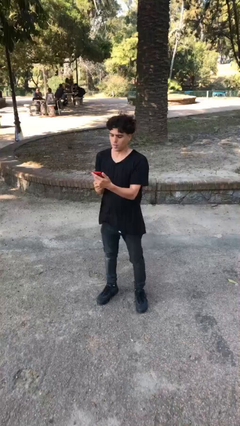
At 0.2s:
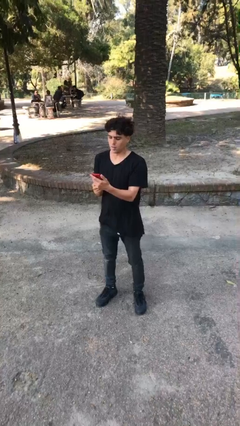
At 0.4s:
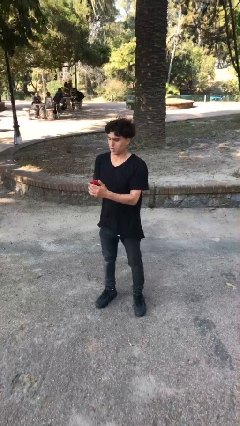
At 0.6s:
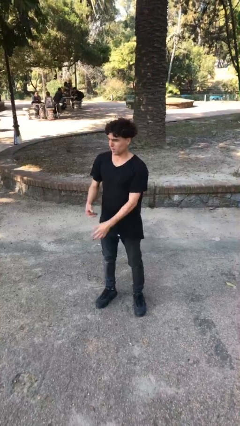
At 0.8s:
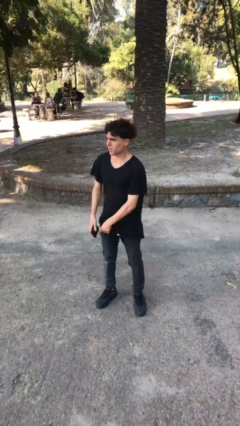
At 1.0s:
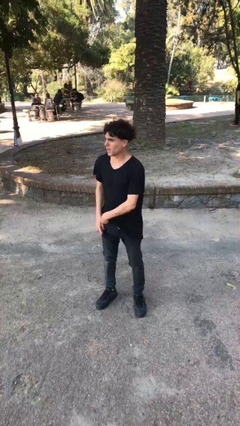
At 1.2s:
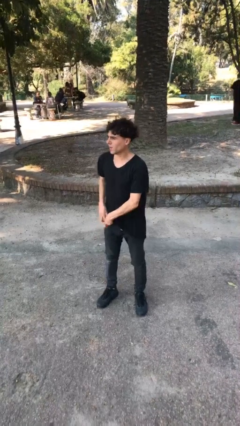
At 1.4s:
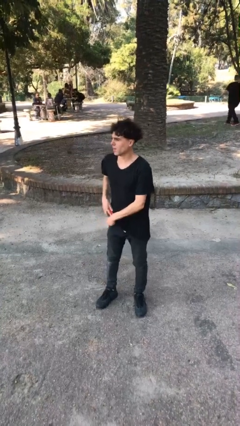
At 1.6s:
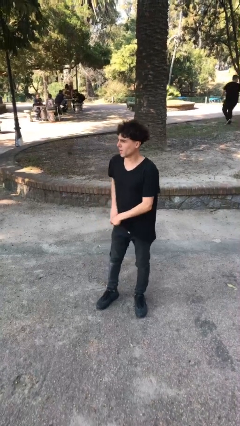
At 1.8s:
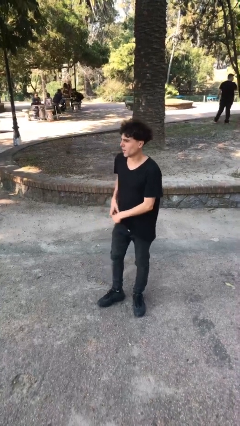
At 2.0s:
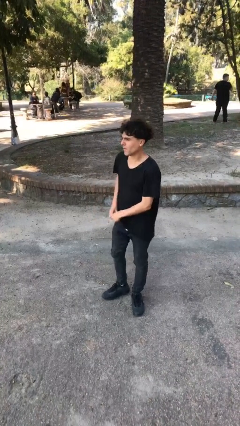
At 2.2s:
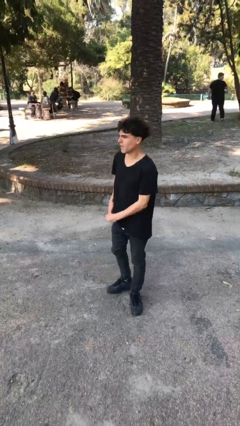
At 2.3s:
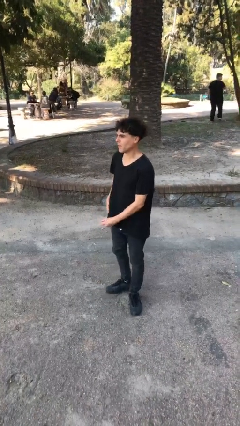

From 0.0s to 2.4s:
person puts phone into pocket

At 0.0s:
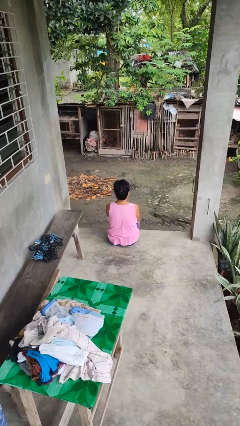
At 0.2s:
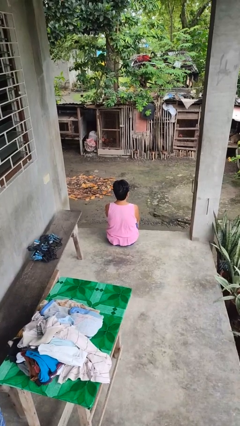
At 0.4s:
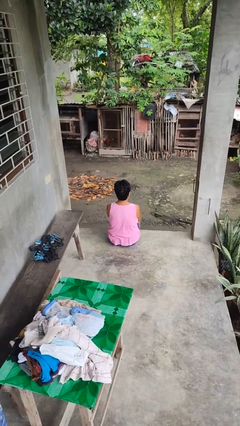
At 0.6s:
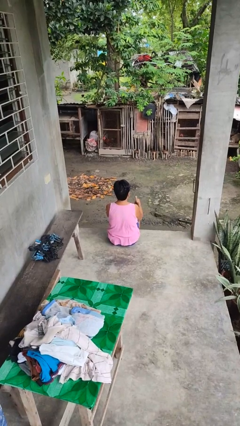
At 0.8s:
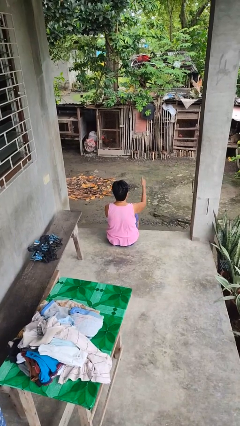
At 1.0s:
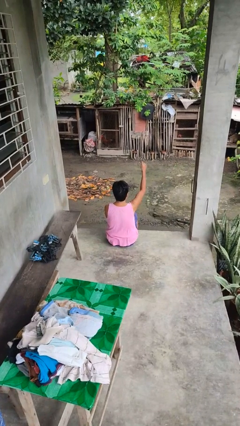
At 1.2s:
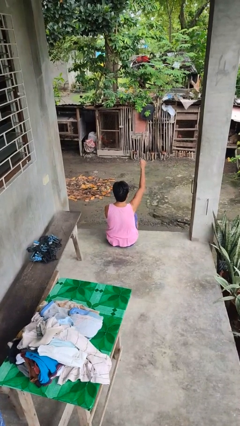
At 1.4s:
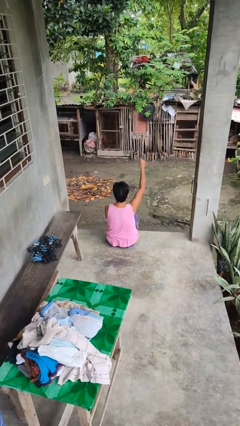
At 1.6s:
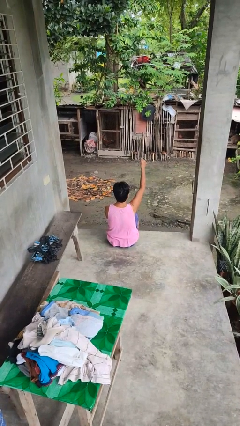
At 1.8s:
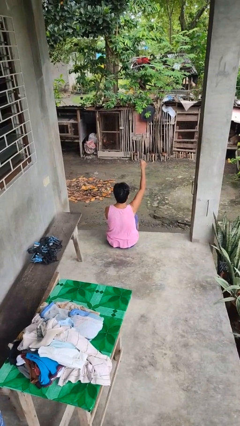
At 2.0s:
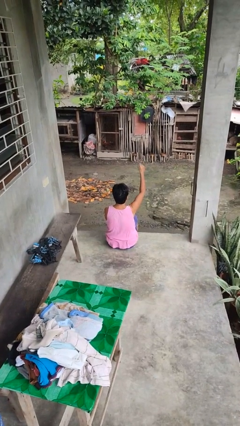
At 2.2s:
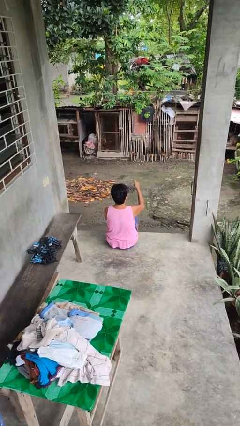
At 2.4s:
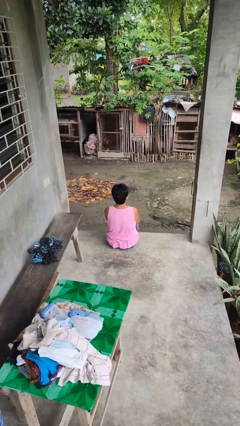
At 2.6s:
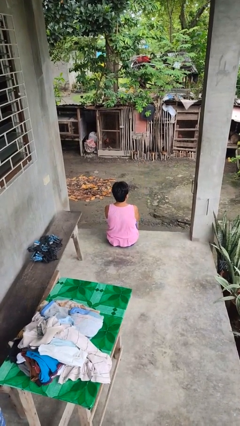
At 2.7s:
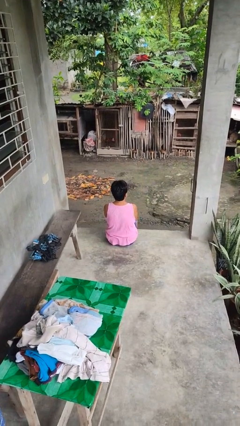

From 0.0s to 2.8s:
person gestures thumbs up

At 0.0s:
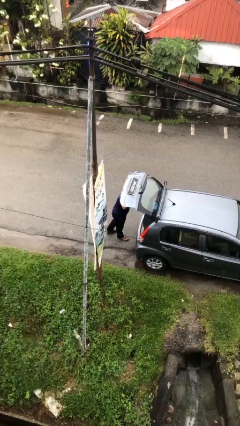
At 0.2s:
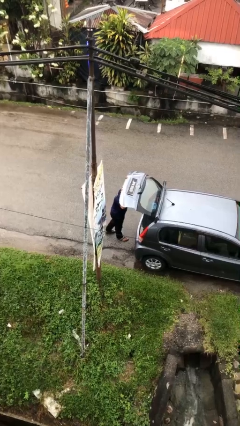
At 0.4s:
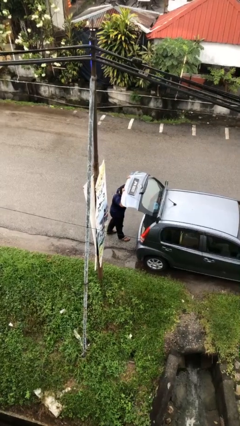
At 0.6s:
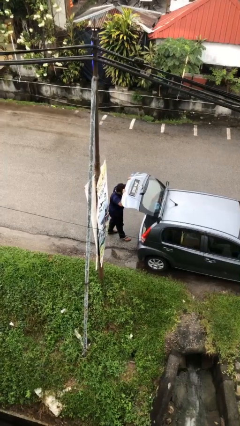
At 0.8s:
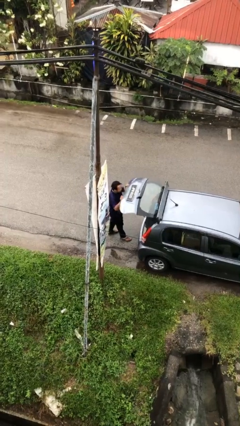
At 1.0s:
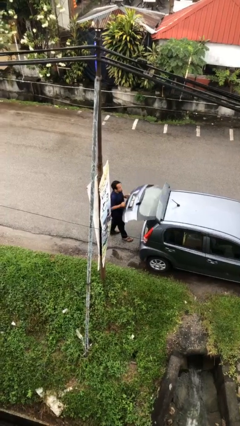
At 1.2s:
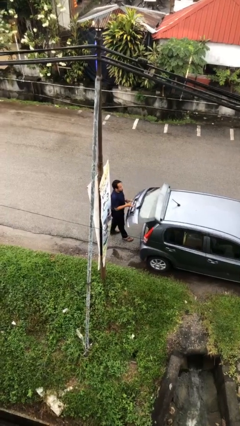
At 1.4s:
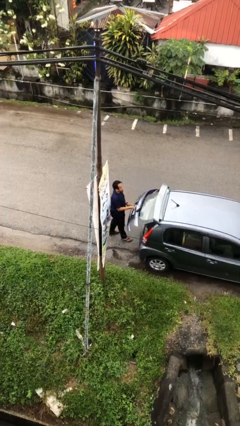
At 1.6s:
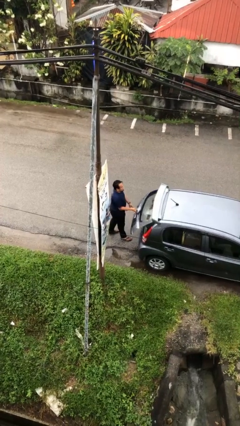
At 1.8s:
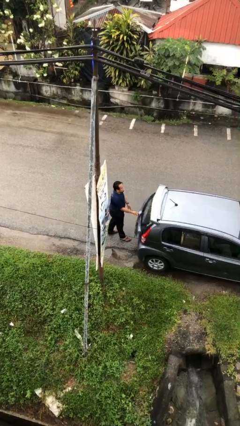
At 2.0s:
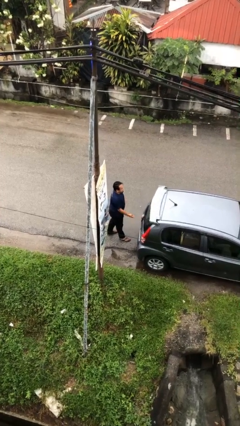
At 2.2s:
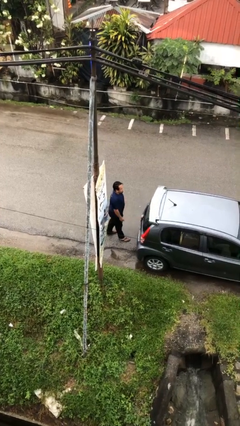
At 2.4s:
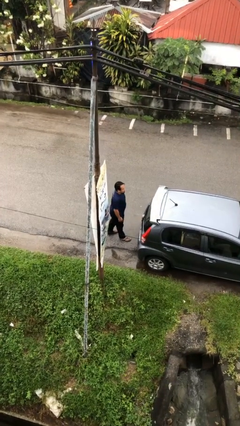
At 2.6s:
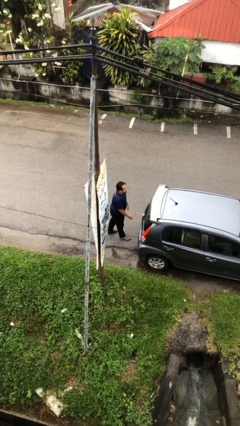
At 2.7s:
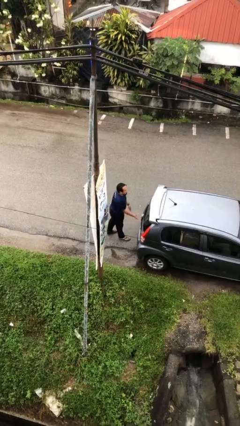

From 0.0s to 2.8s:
person closes car trunk

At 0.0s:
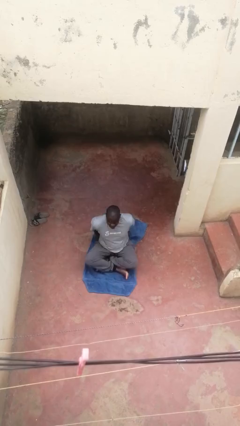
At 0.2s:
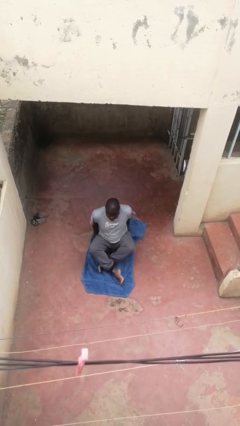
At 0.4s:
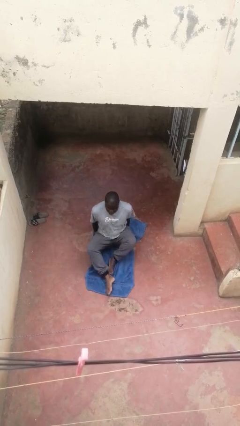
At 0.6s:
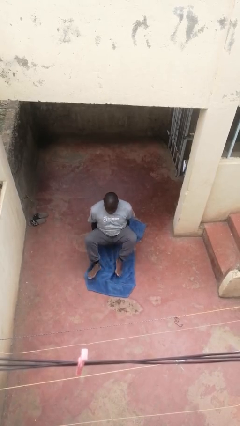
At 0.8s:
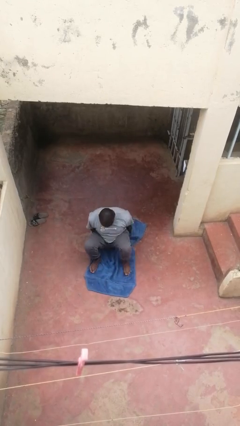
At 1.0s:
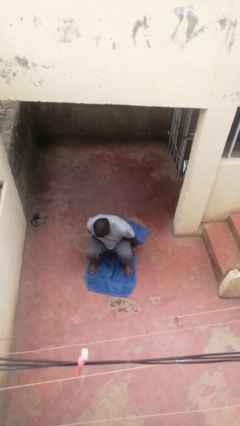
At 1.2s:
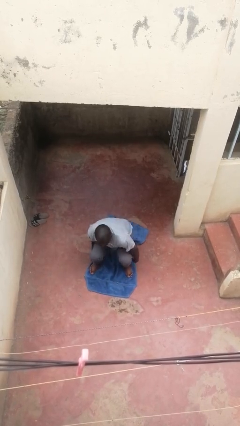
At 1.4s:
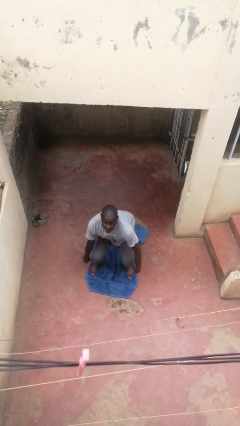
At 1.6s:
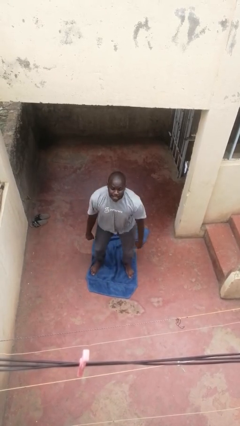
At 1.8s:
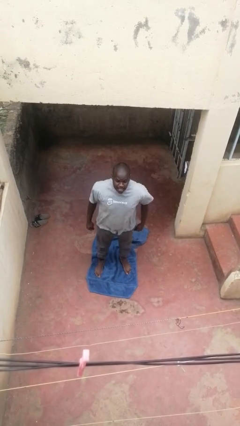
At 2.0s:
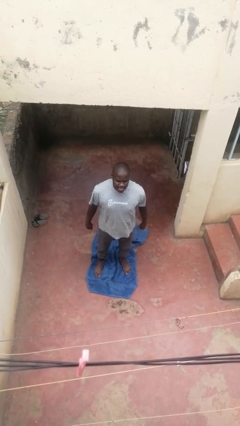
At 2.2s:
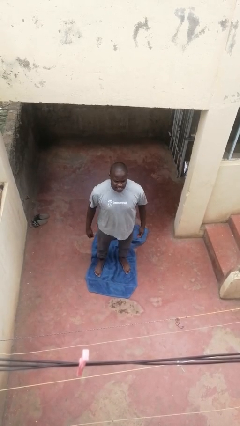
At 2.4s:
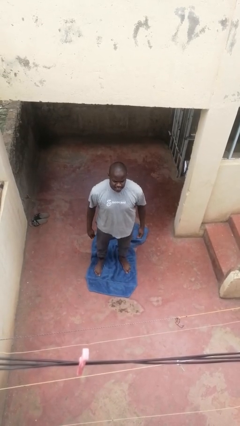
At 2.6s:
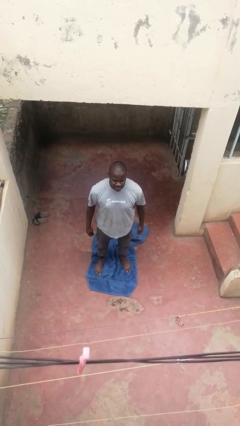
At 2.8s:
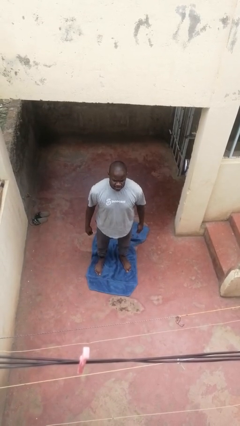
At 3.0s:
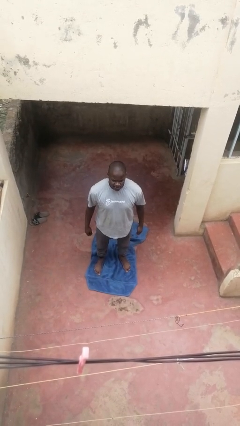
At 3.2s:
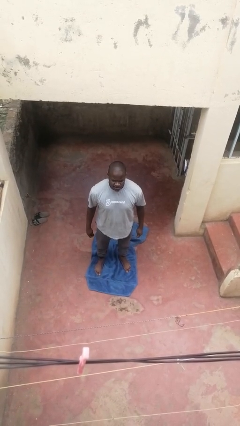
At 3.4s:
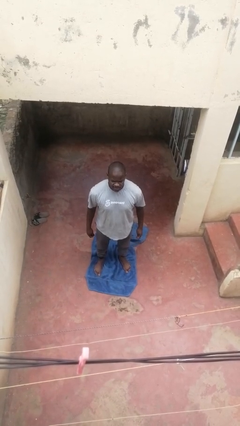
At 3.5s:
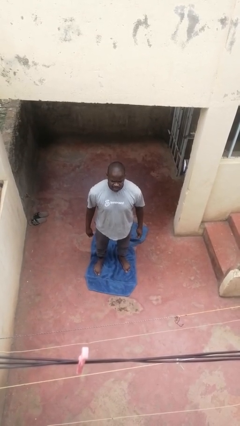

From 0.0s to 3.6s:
person stands up from floor

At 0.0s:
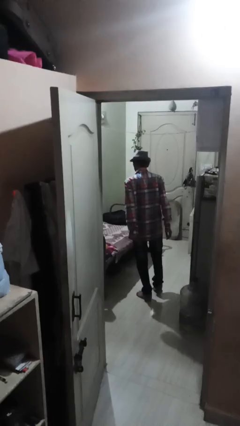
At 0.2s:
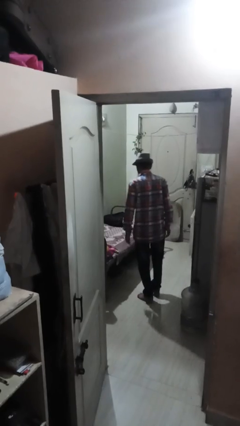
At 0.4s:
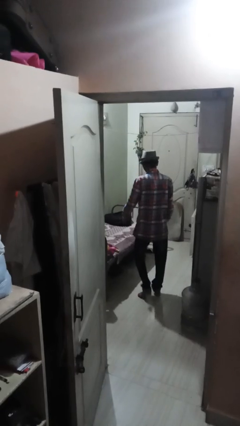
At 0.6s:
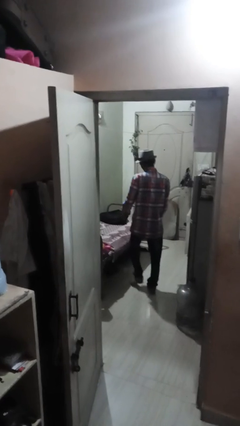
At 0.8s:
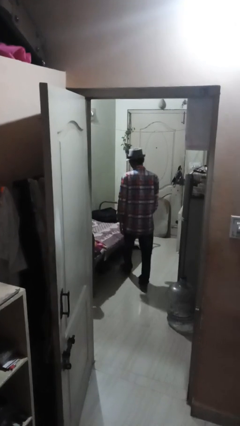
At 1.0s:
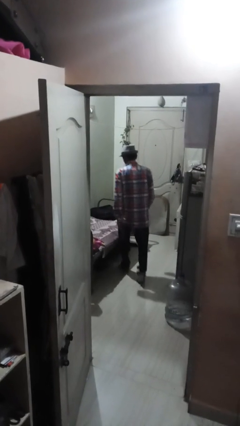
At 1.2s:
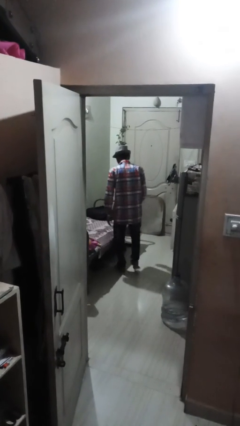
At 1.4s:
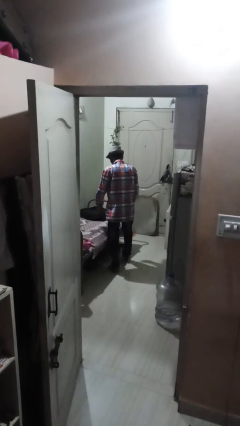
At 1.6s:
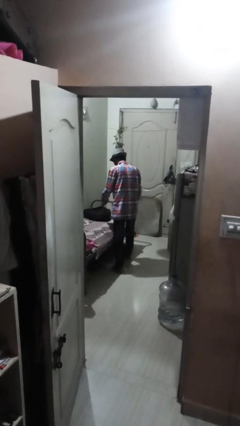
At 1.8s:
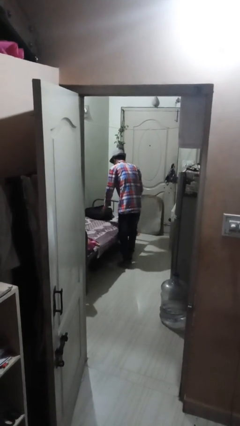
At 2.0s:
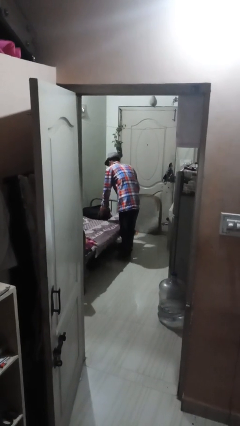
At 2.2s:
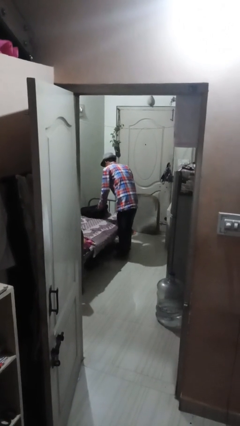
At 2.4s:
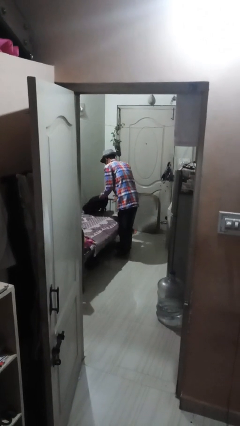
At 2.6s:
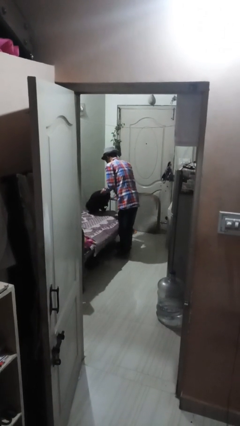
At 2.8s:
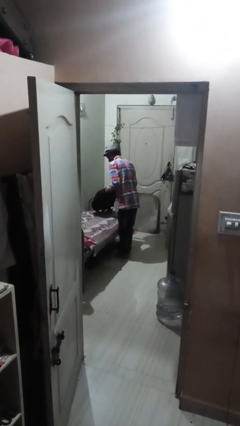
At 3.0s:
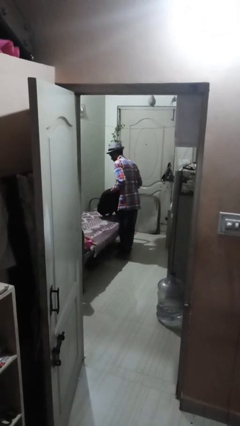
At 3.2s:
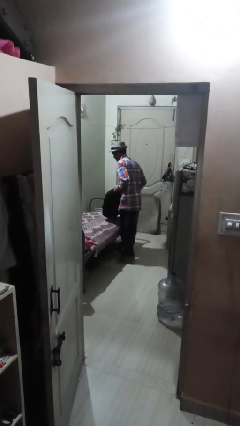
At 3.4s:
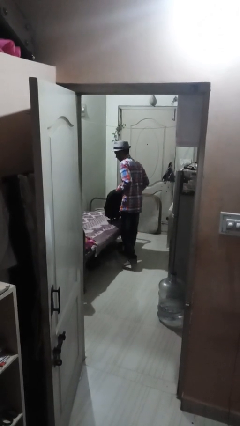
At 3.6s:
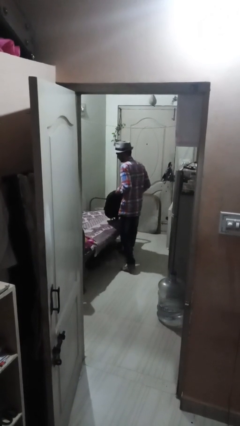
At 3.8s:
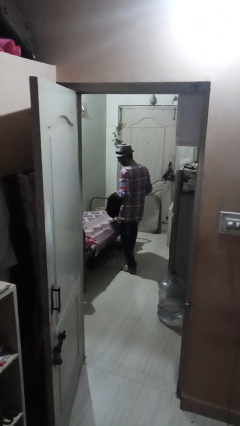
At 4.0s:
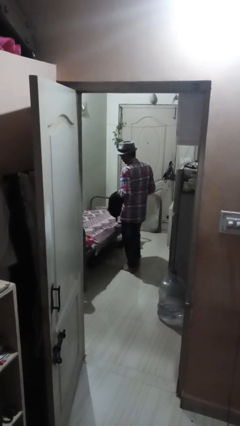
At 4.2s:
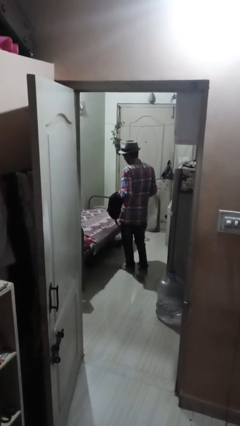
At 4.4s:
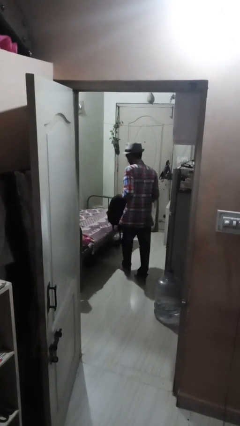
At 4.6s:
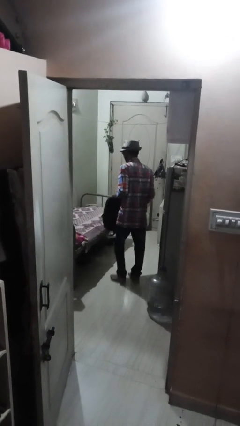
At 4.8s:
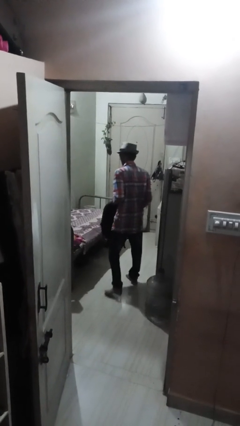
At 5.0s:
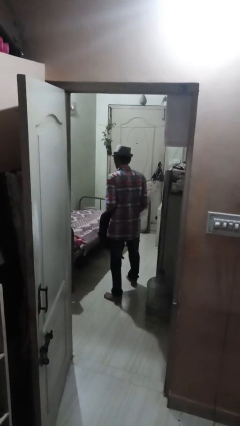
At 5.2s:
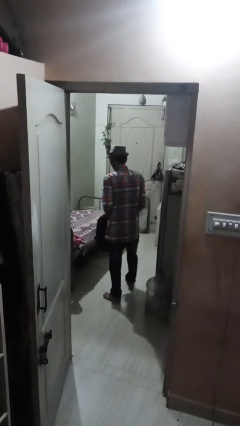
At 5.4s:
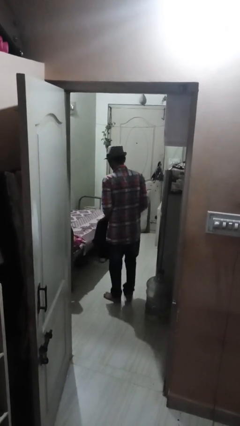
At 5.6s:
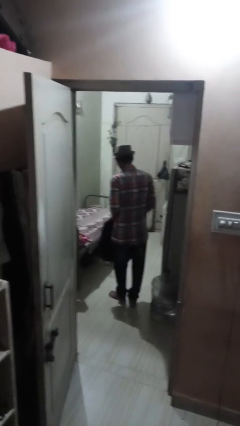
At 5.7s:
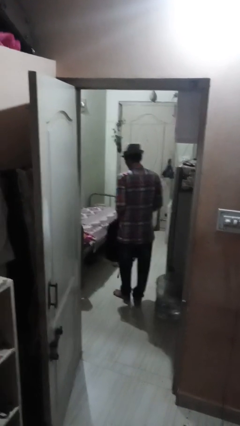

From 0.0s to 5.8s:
person picks up object from bed
